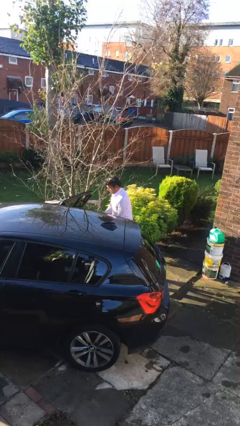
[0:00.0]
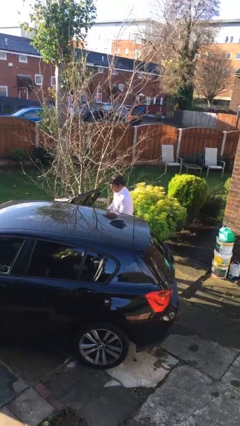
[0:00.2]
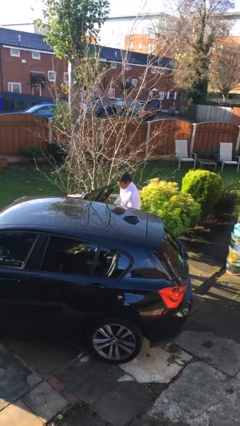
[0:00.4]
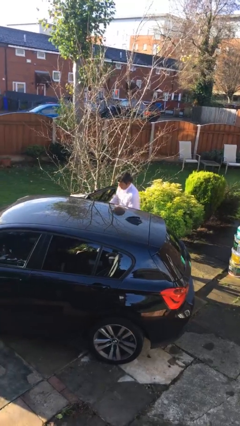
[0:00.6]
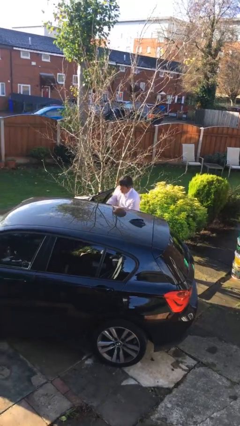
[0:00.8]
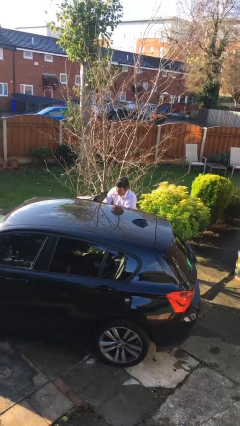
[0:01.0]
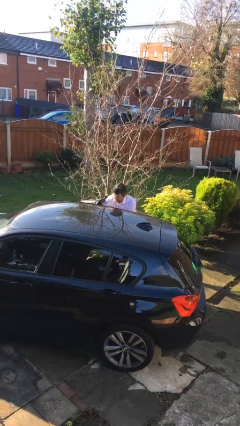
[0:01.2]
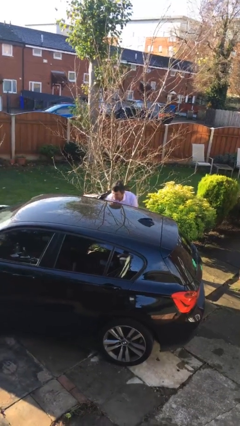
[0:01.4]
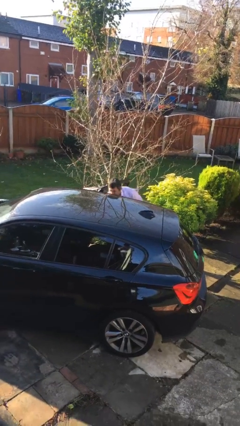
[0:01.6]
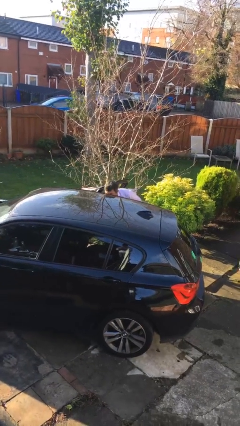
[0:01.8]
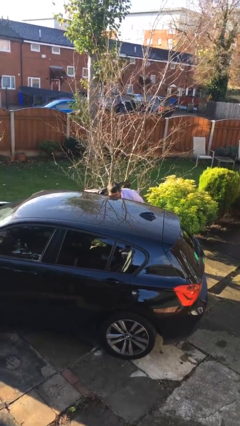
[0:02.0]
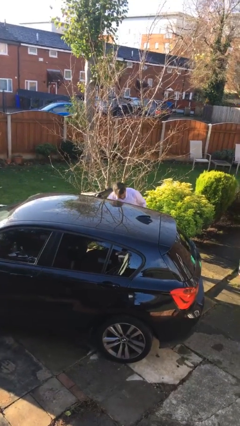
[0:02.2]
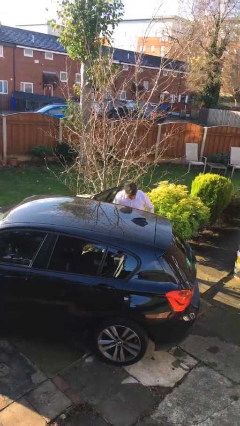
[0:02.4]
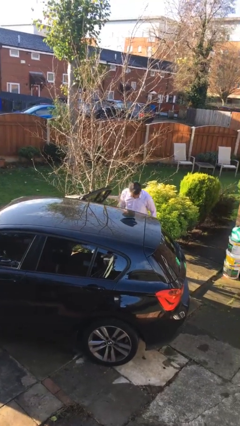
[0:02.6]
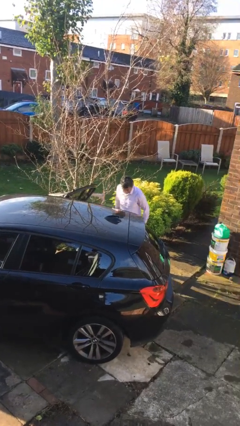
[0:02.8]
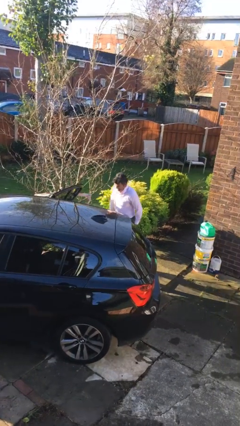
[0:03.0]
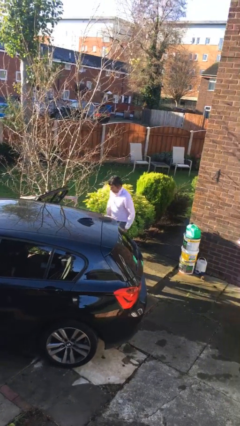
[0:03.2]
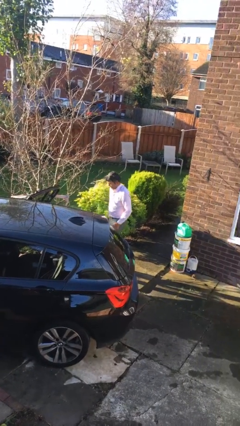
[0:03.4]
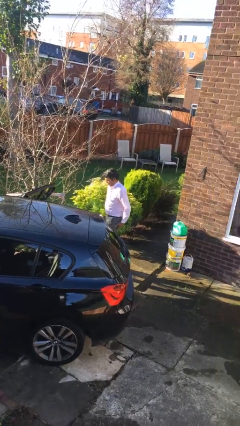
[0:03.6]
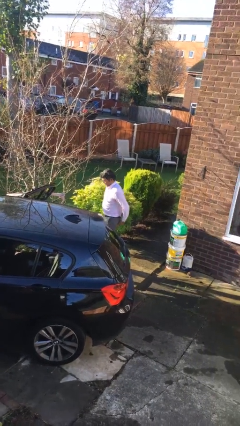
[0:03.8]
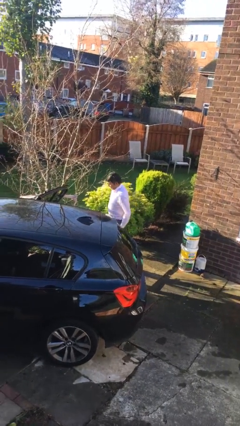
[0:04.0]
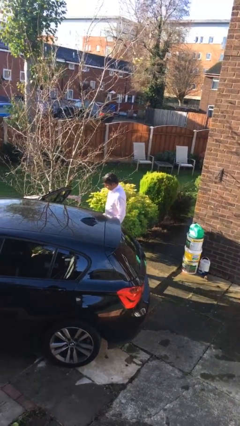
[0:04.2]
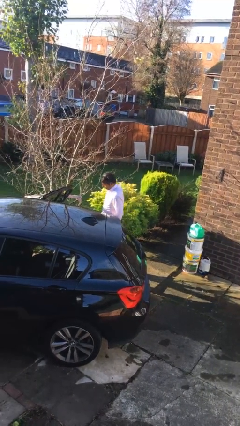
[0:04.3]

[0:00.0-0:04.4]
person loads car

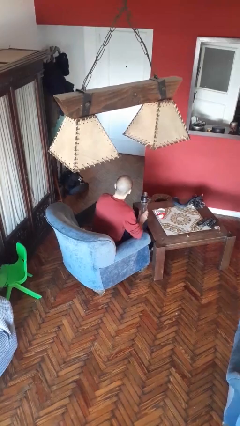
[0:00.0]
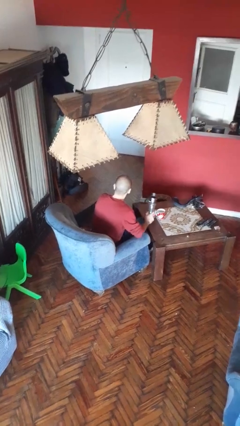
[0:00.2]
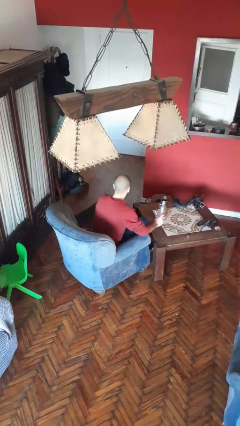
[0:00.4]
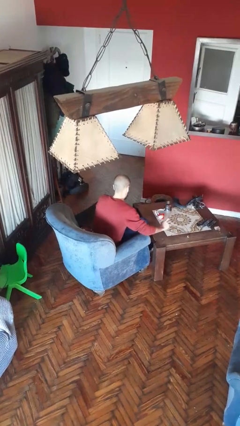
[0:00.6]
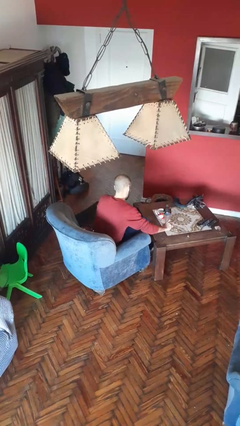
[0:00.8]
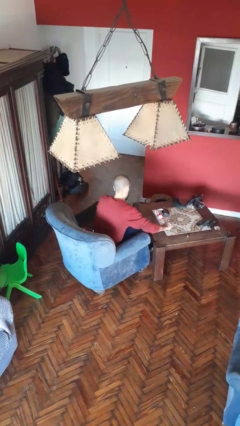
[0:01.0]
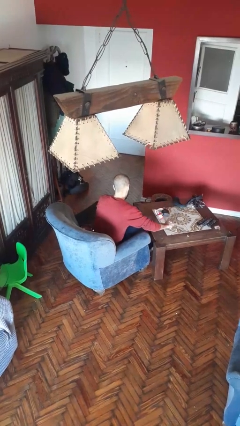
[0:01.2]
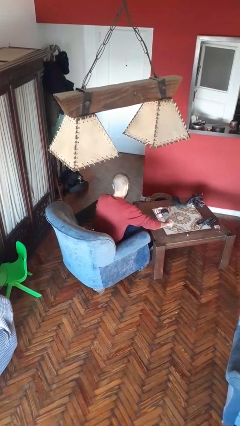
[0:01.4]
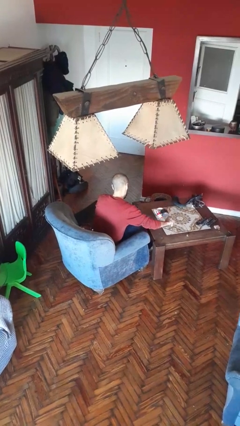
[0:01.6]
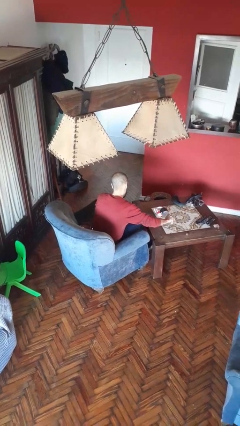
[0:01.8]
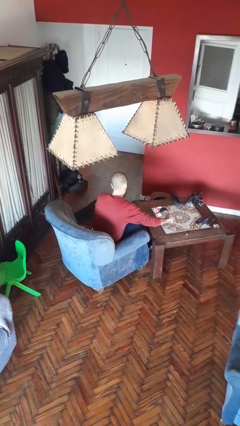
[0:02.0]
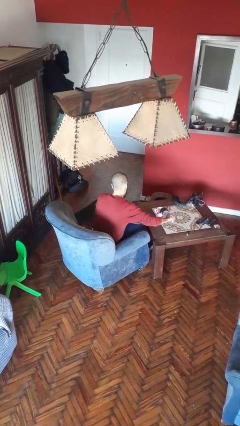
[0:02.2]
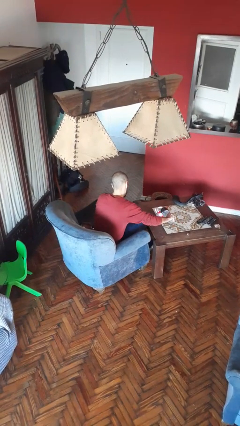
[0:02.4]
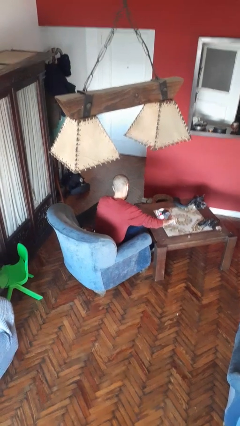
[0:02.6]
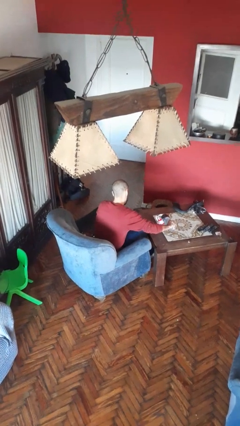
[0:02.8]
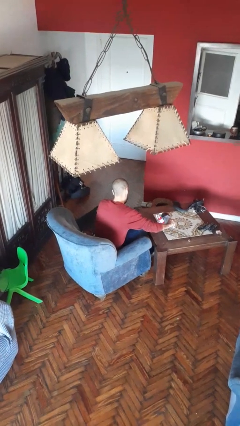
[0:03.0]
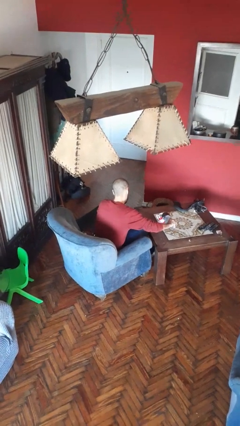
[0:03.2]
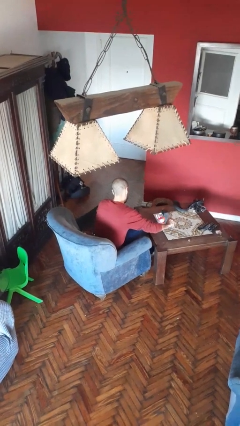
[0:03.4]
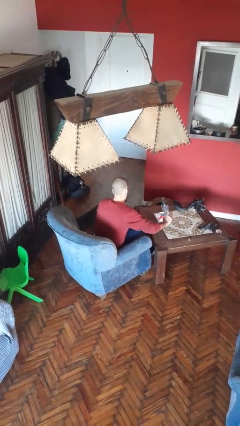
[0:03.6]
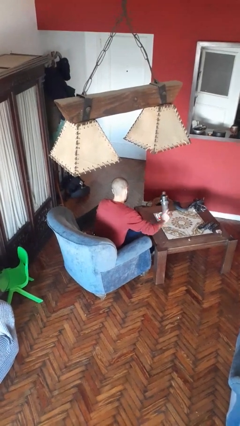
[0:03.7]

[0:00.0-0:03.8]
person pours liquid into cup

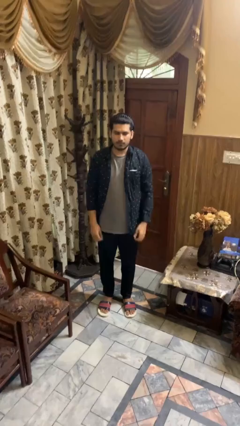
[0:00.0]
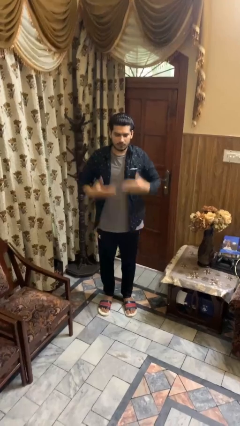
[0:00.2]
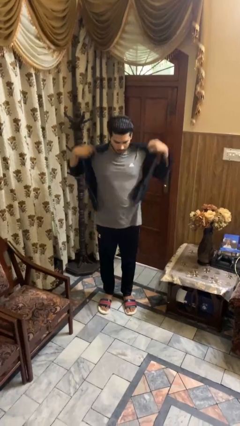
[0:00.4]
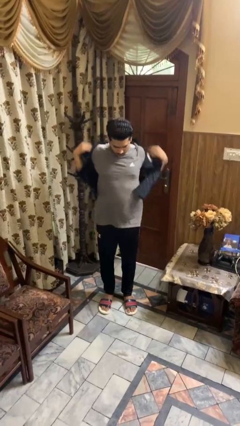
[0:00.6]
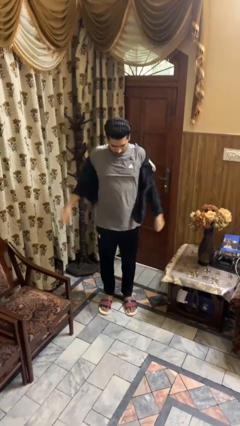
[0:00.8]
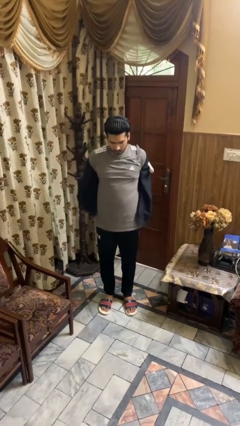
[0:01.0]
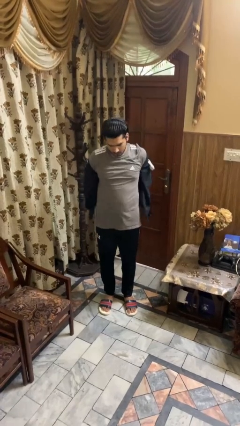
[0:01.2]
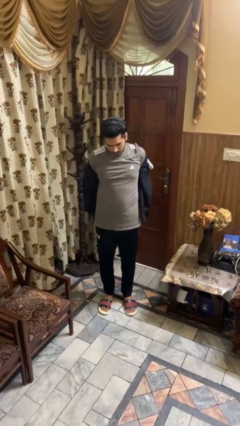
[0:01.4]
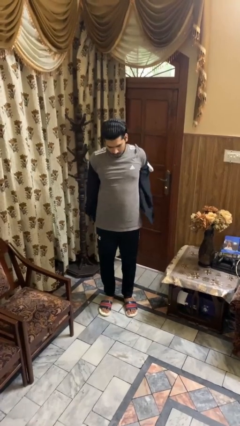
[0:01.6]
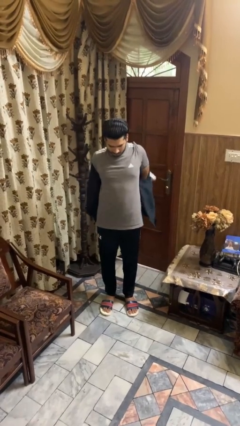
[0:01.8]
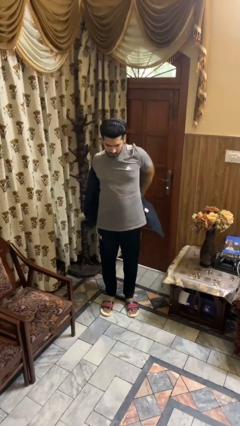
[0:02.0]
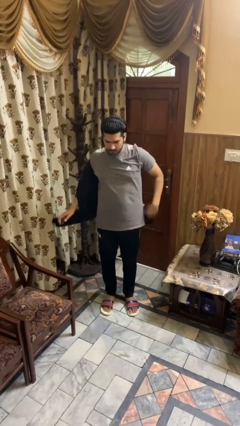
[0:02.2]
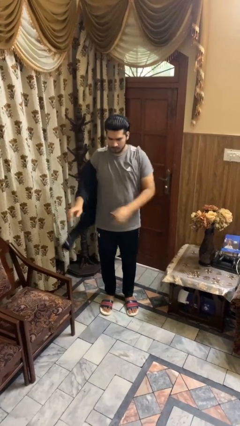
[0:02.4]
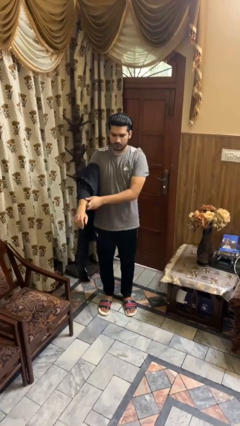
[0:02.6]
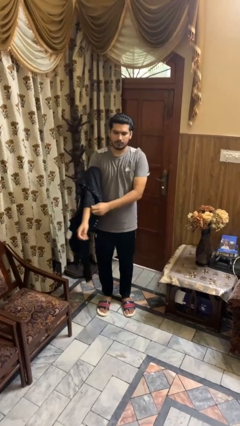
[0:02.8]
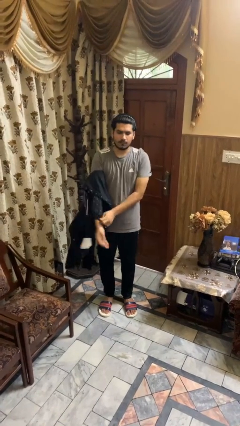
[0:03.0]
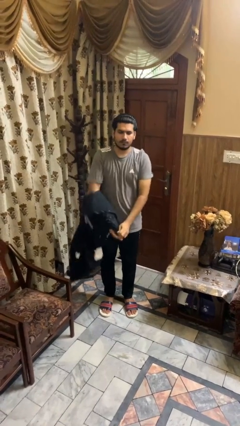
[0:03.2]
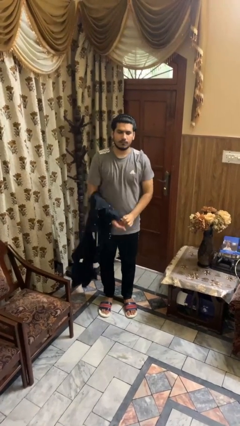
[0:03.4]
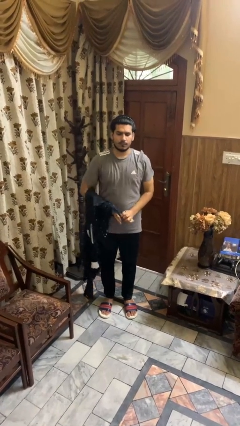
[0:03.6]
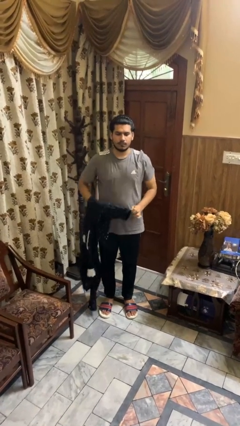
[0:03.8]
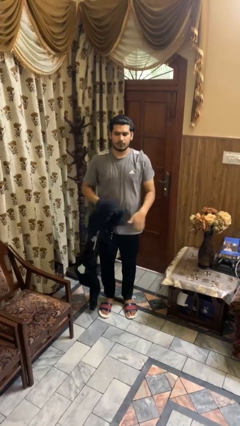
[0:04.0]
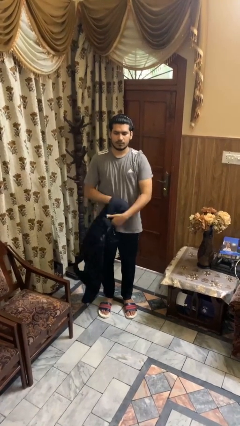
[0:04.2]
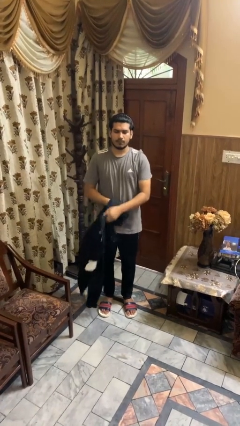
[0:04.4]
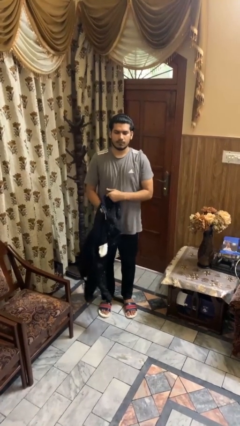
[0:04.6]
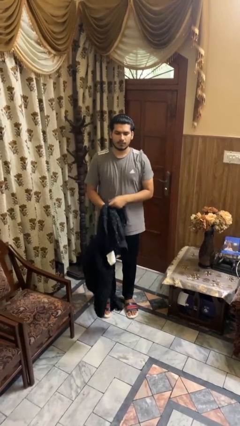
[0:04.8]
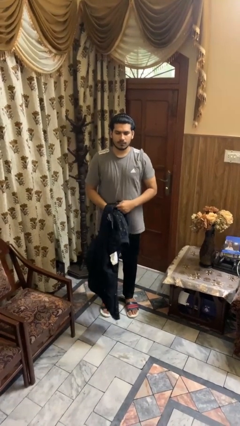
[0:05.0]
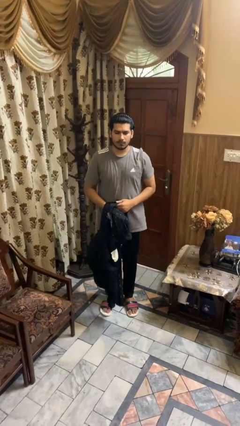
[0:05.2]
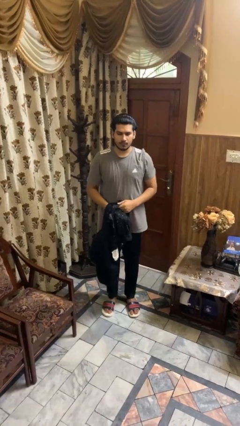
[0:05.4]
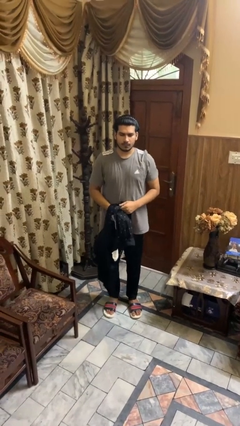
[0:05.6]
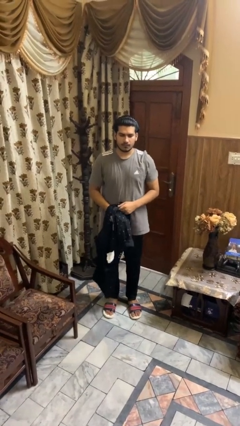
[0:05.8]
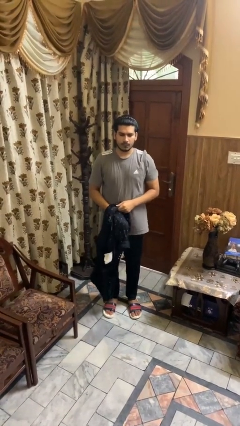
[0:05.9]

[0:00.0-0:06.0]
person takes off shirt

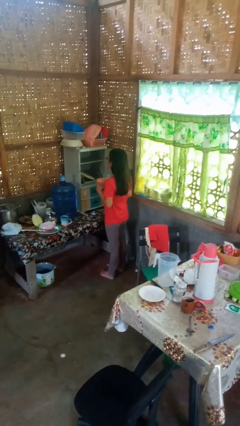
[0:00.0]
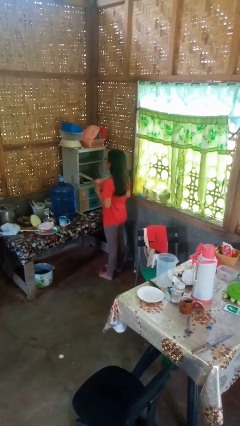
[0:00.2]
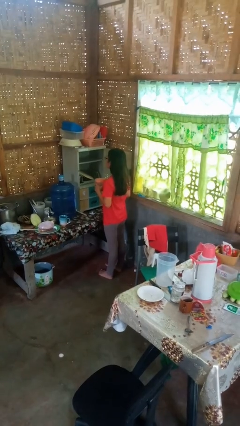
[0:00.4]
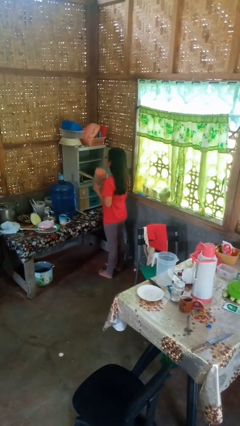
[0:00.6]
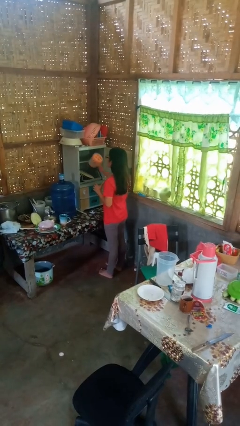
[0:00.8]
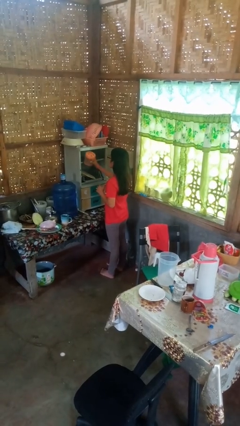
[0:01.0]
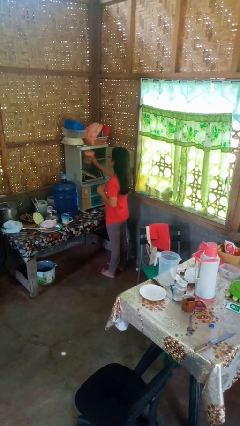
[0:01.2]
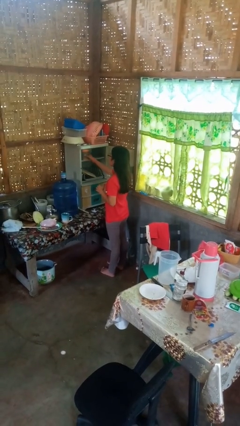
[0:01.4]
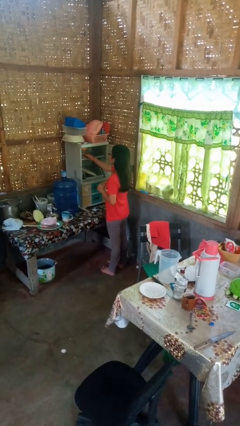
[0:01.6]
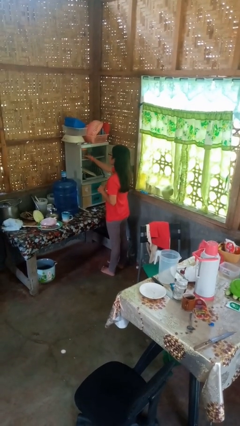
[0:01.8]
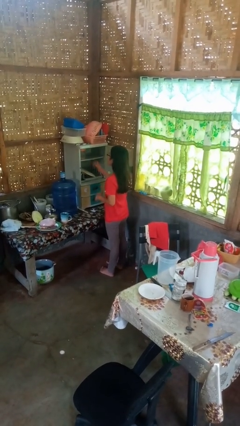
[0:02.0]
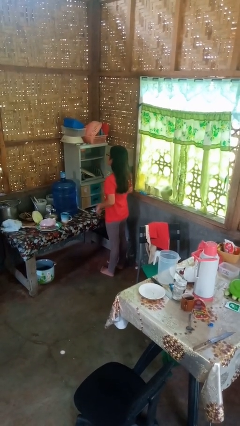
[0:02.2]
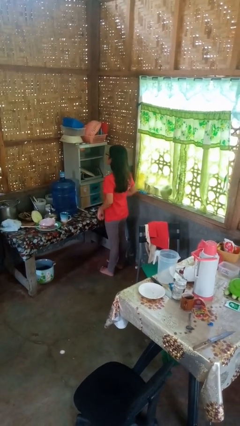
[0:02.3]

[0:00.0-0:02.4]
person puts down object into cabinet

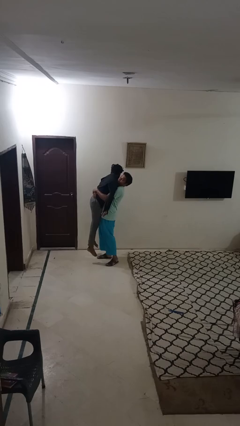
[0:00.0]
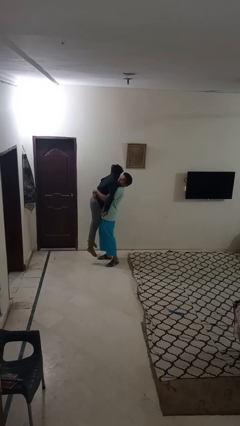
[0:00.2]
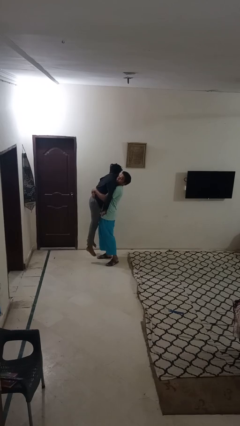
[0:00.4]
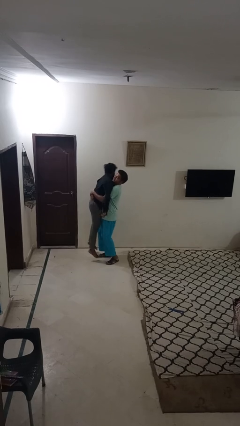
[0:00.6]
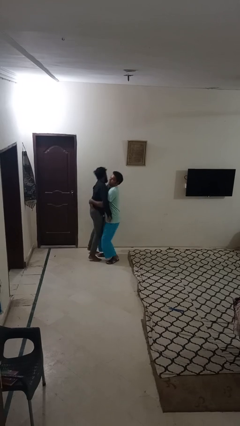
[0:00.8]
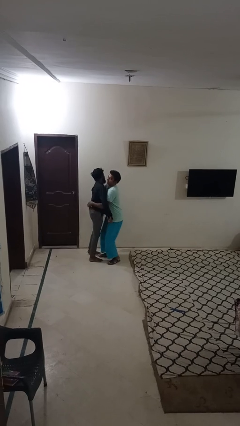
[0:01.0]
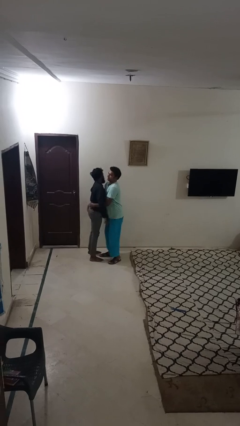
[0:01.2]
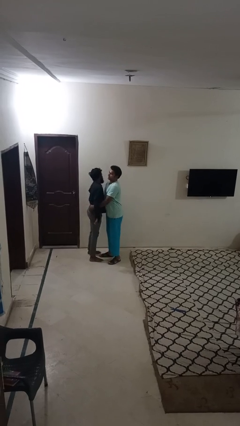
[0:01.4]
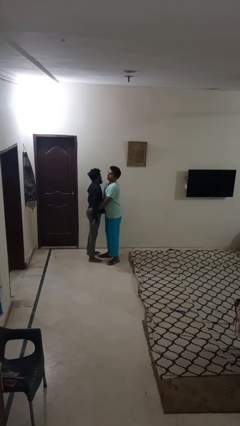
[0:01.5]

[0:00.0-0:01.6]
person puts down person
